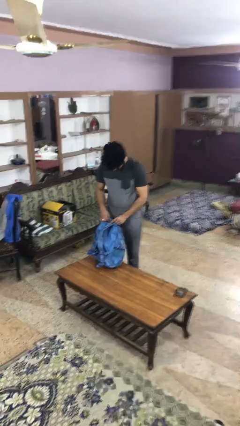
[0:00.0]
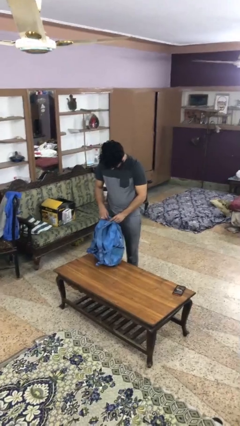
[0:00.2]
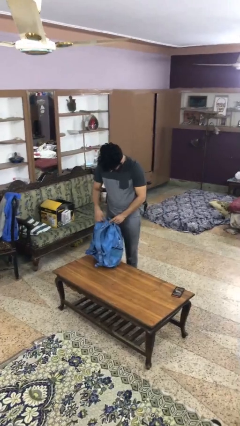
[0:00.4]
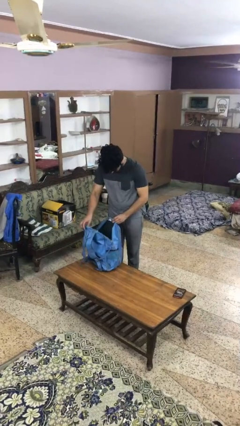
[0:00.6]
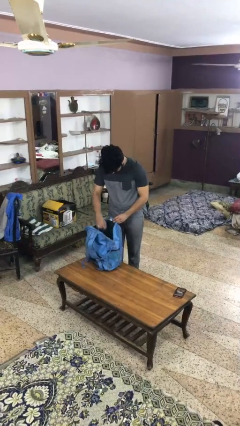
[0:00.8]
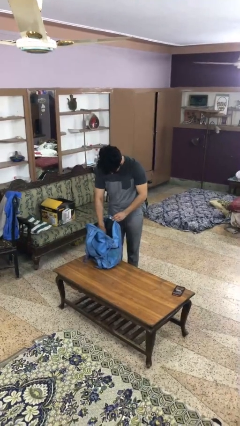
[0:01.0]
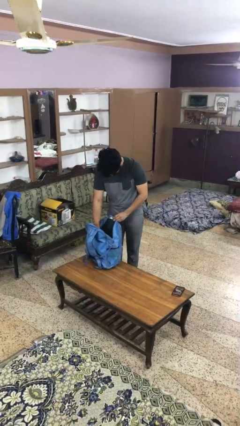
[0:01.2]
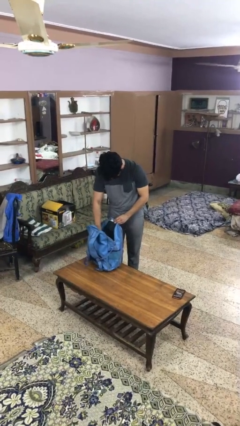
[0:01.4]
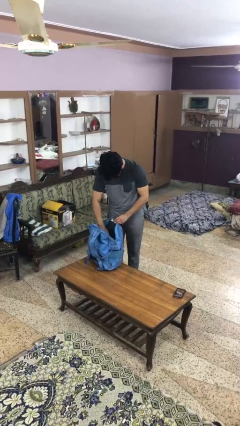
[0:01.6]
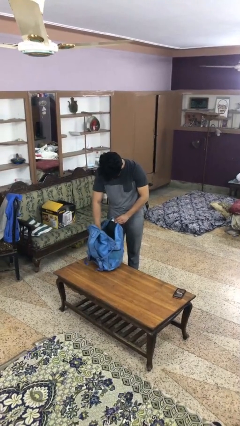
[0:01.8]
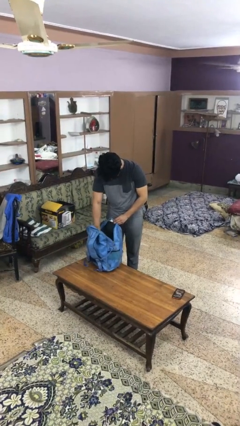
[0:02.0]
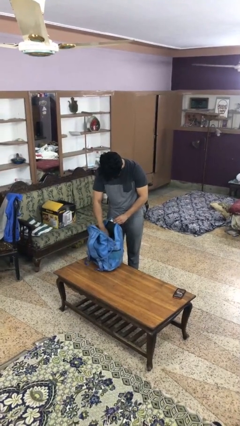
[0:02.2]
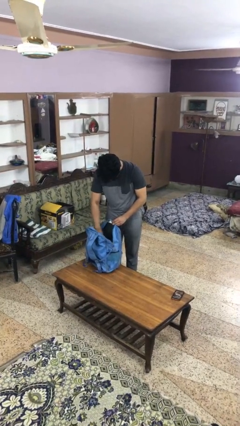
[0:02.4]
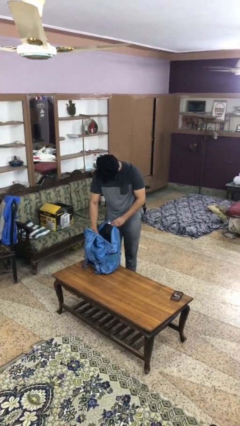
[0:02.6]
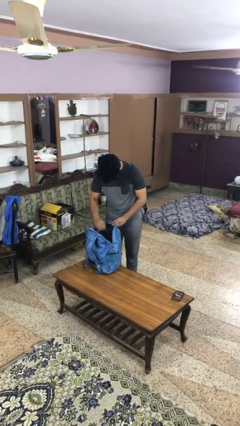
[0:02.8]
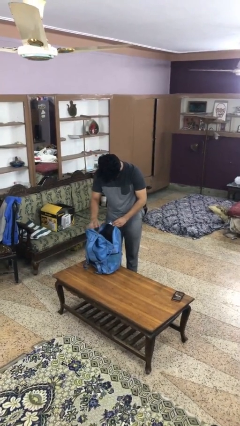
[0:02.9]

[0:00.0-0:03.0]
person searches in bag

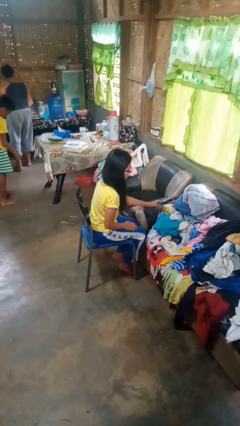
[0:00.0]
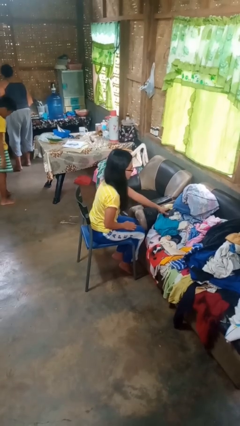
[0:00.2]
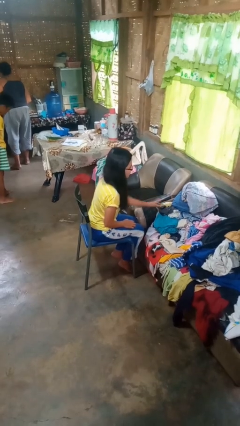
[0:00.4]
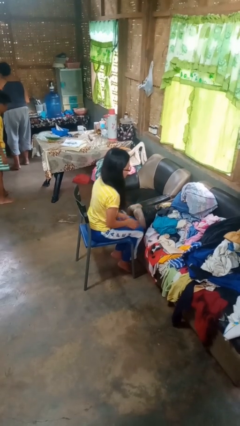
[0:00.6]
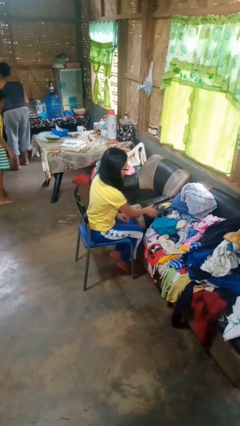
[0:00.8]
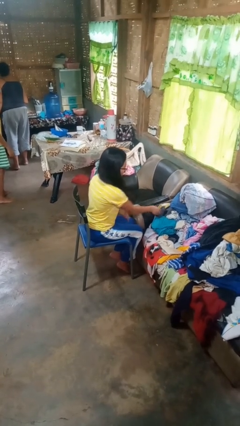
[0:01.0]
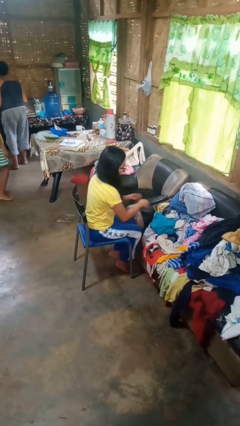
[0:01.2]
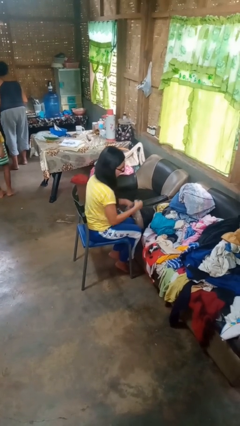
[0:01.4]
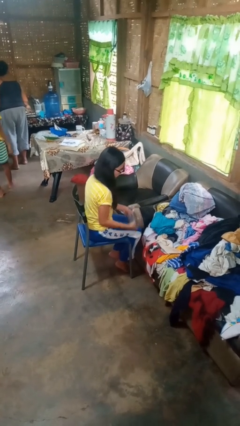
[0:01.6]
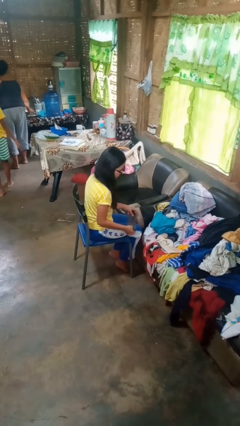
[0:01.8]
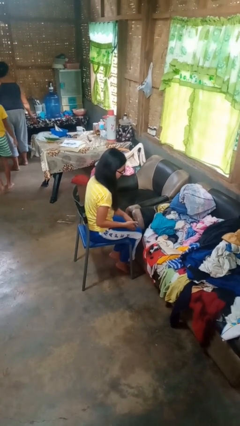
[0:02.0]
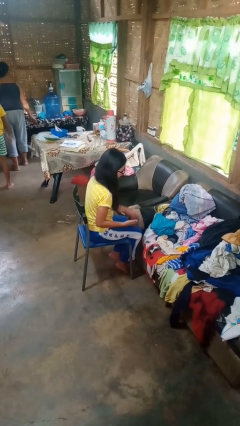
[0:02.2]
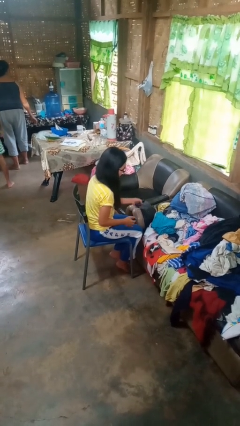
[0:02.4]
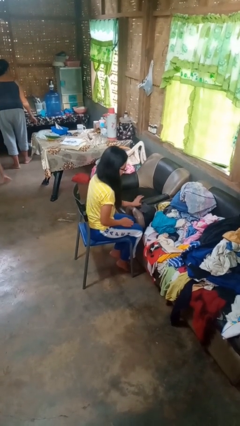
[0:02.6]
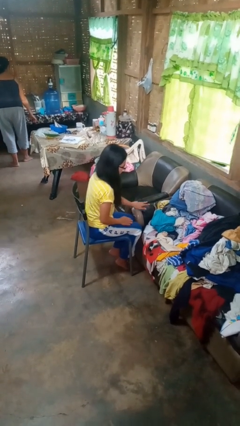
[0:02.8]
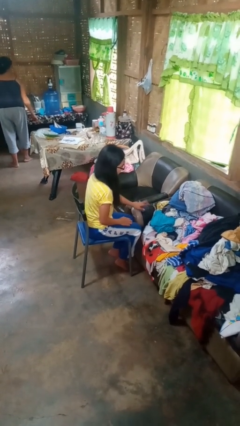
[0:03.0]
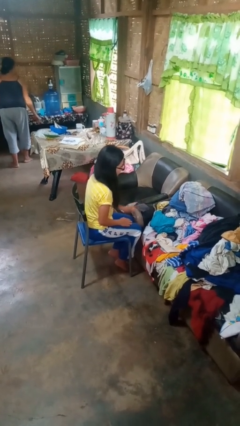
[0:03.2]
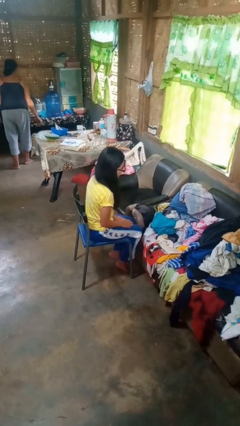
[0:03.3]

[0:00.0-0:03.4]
person folds socks

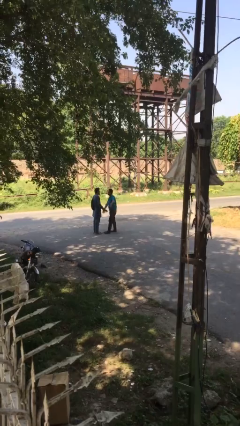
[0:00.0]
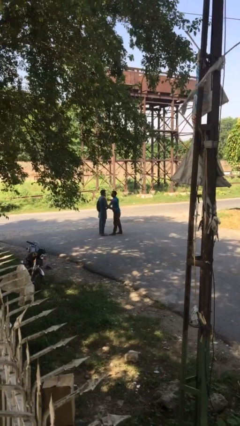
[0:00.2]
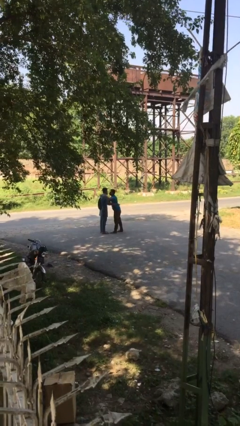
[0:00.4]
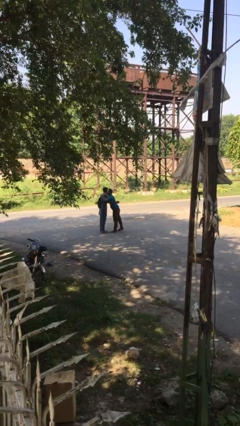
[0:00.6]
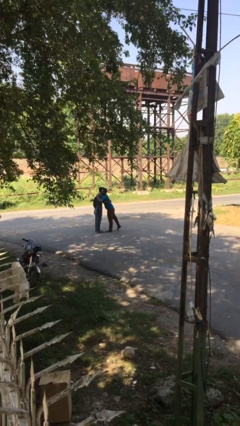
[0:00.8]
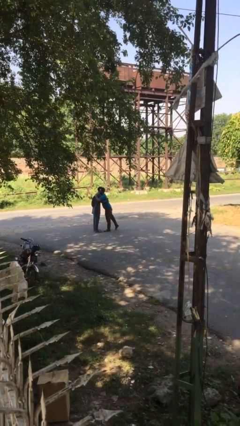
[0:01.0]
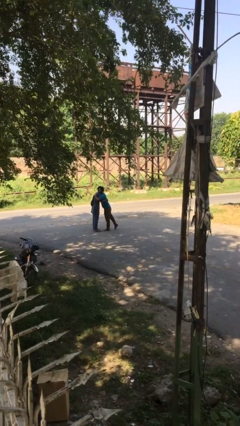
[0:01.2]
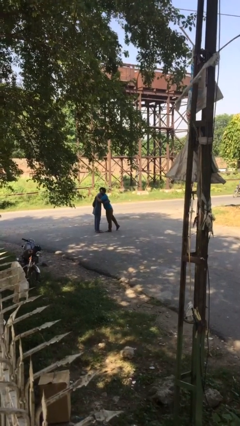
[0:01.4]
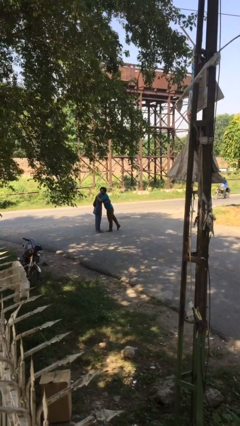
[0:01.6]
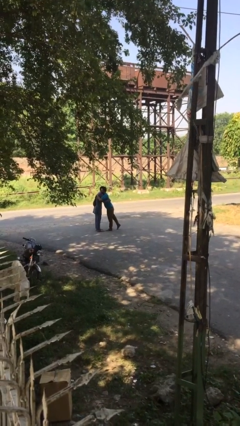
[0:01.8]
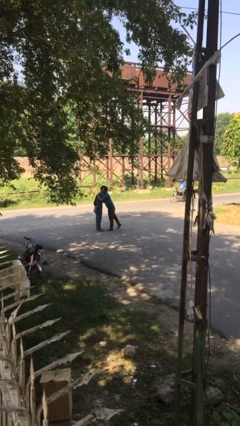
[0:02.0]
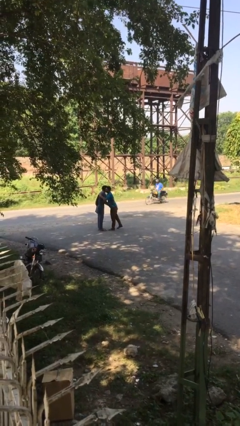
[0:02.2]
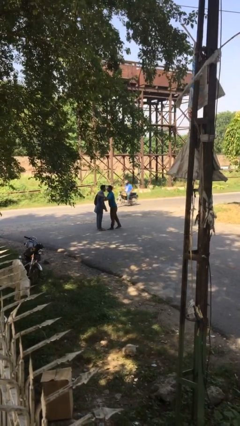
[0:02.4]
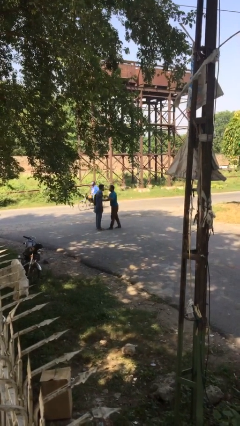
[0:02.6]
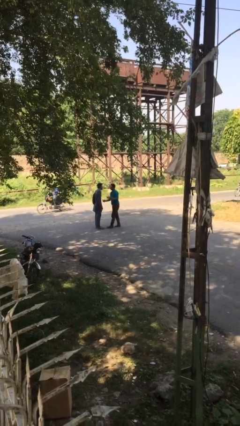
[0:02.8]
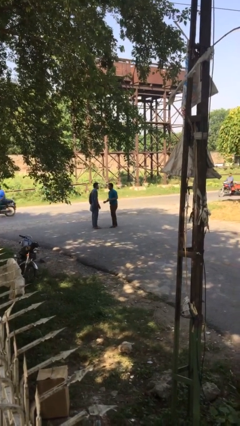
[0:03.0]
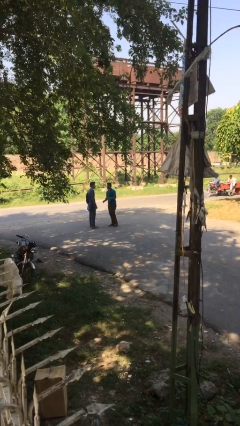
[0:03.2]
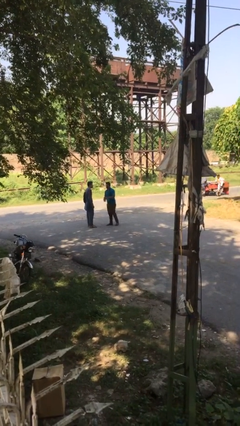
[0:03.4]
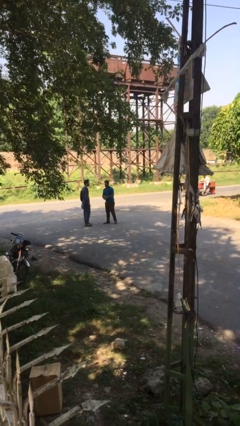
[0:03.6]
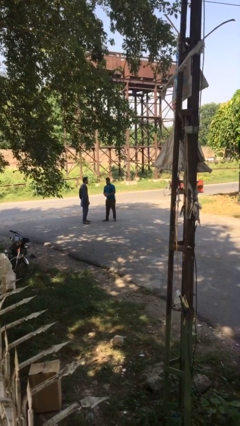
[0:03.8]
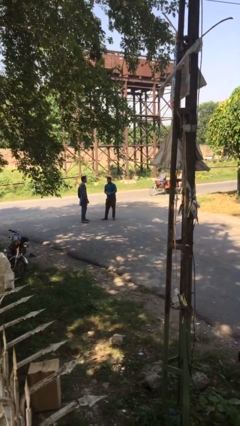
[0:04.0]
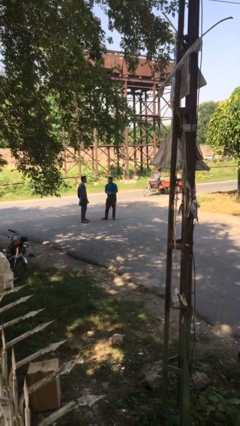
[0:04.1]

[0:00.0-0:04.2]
person embraces person

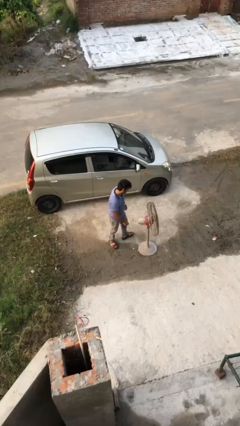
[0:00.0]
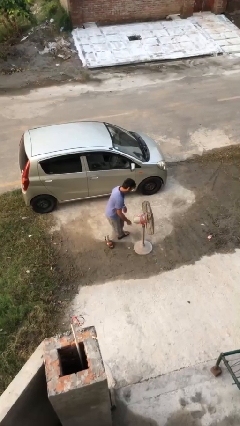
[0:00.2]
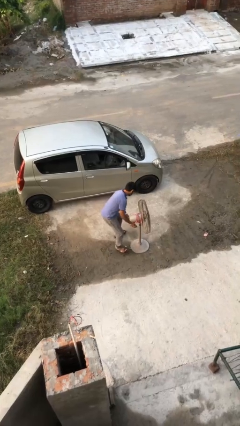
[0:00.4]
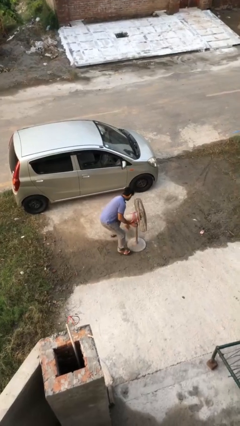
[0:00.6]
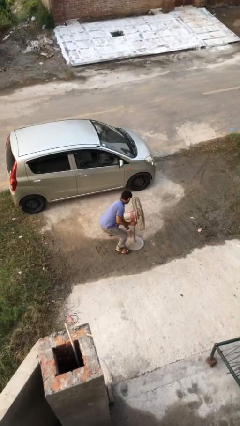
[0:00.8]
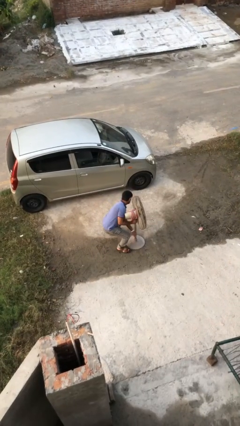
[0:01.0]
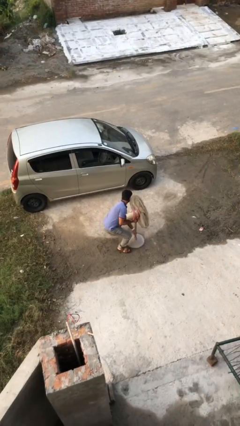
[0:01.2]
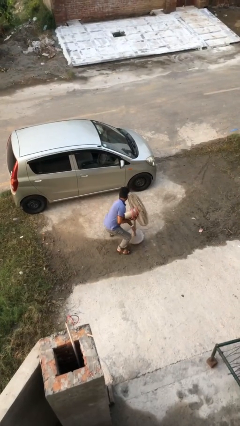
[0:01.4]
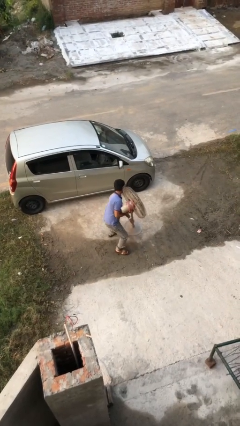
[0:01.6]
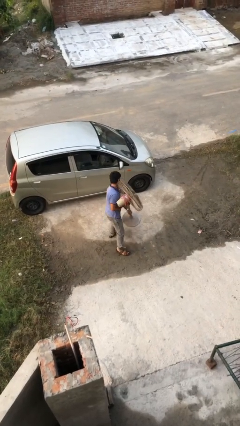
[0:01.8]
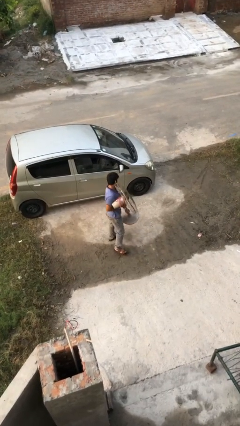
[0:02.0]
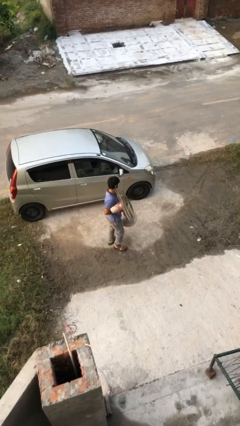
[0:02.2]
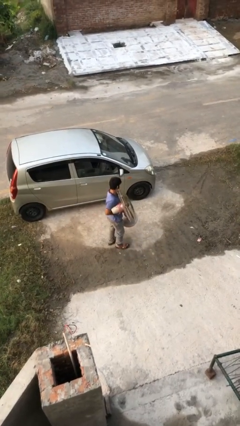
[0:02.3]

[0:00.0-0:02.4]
person picks up object from floor

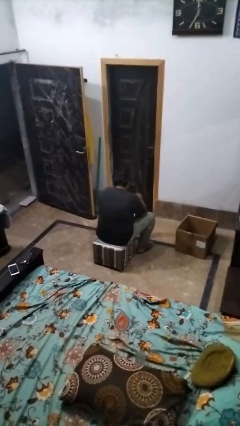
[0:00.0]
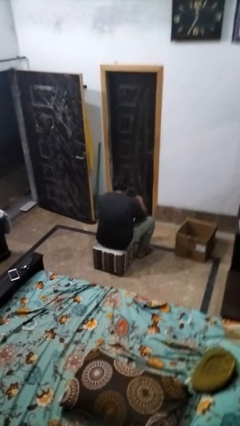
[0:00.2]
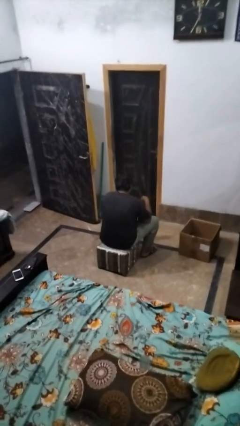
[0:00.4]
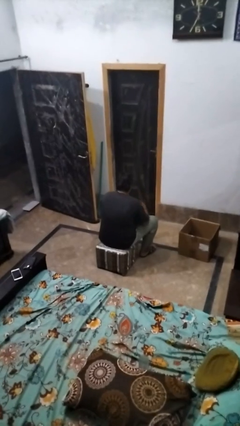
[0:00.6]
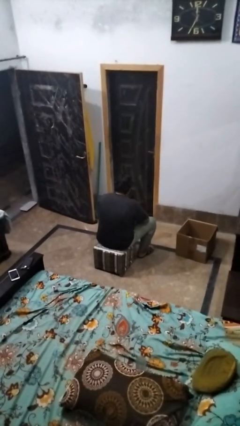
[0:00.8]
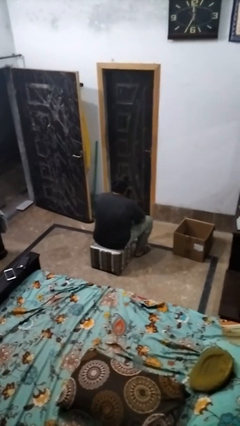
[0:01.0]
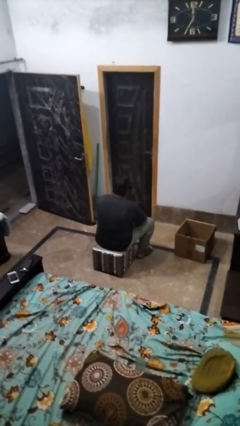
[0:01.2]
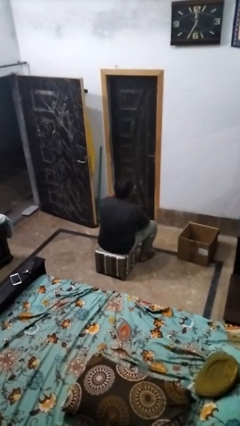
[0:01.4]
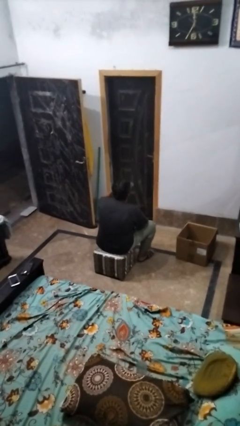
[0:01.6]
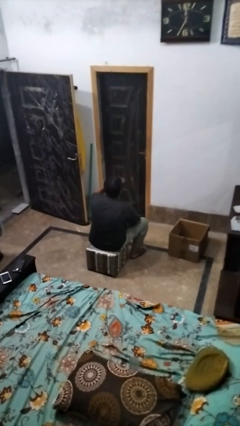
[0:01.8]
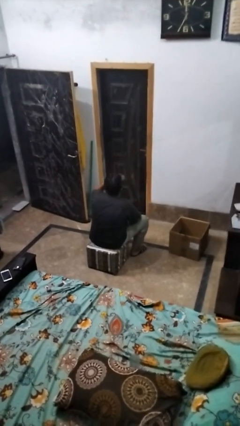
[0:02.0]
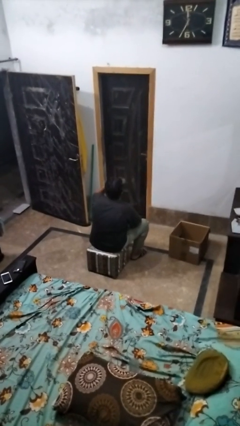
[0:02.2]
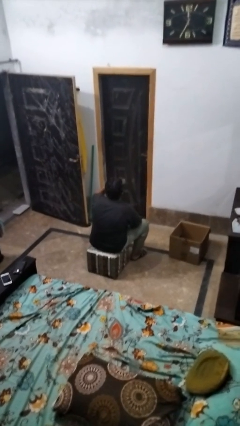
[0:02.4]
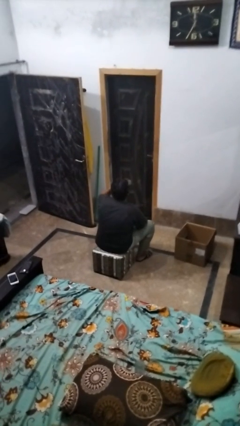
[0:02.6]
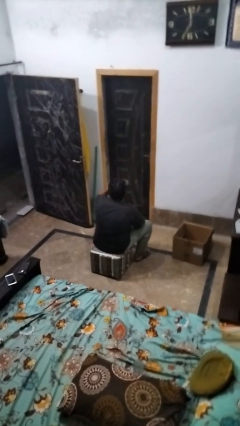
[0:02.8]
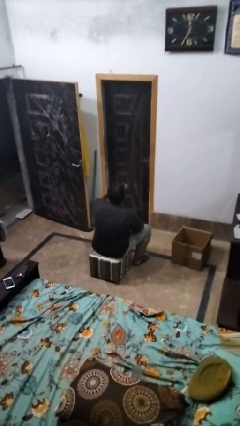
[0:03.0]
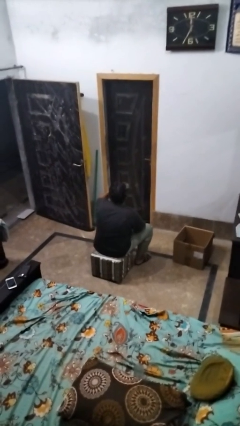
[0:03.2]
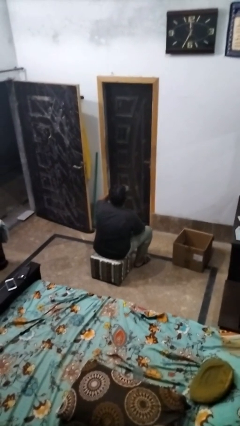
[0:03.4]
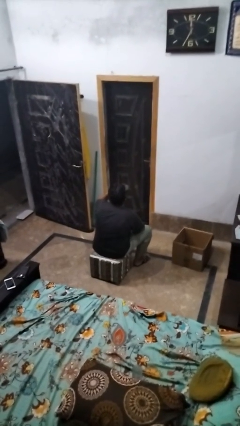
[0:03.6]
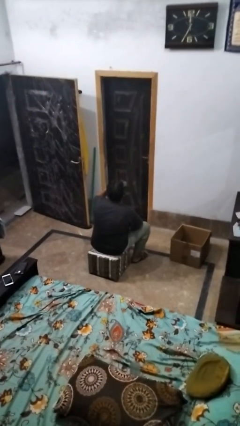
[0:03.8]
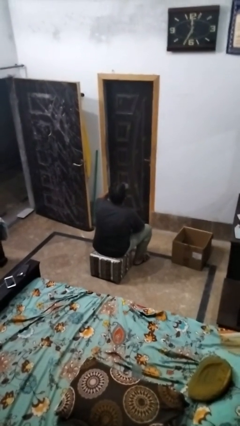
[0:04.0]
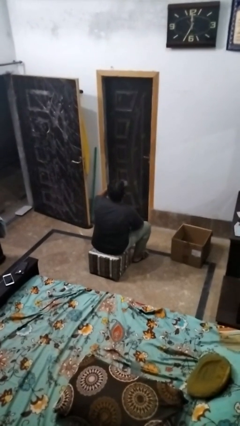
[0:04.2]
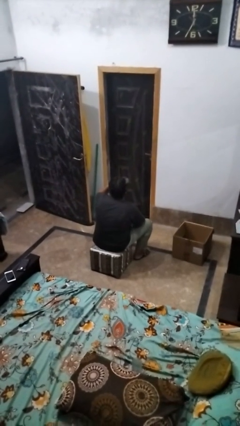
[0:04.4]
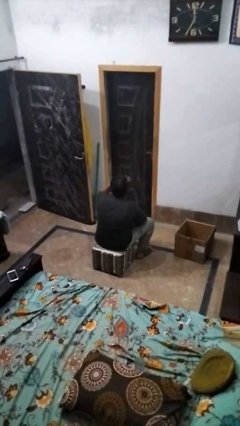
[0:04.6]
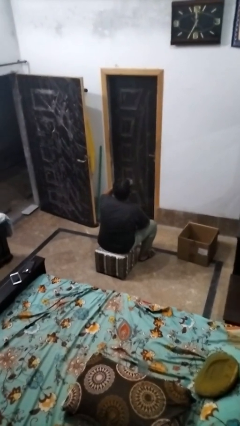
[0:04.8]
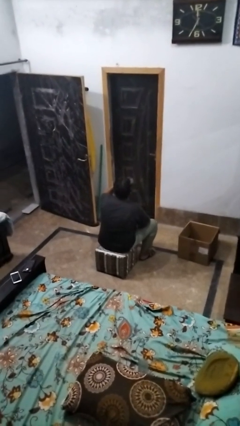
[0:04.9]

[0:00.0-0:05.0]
person drinks from mug
